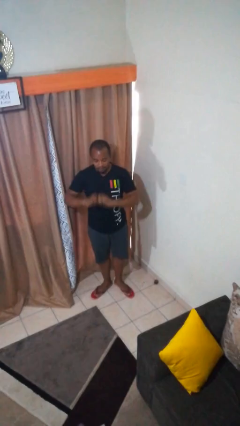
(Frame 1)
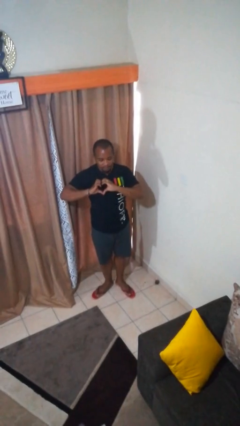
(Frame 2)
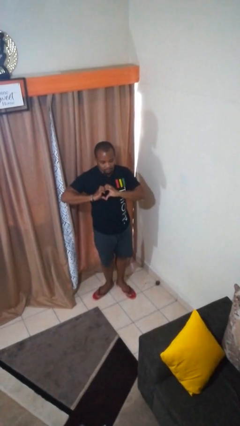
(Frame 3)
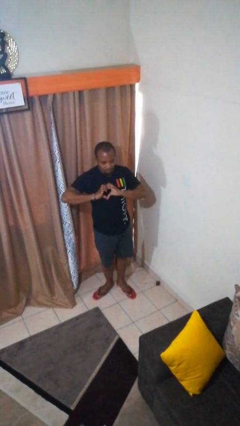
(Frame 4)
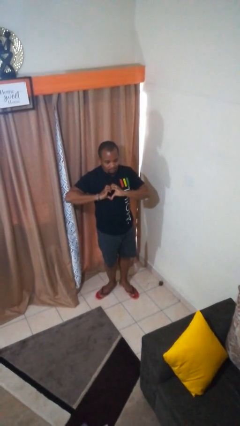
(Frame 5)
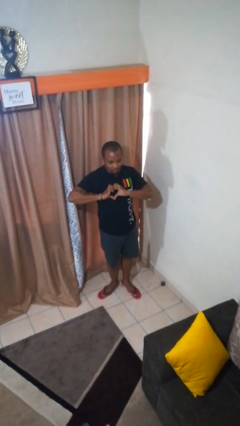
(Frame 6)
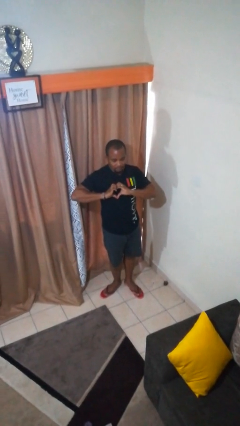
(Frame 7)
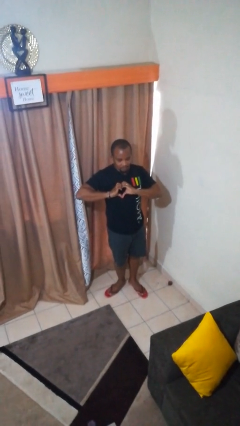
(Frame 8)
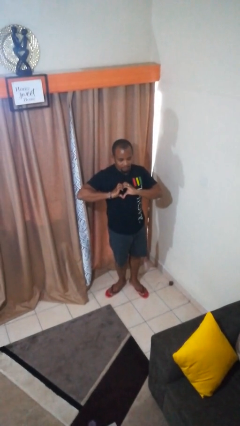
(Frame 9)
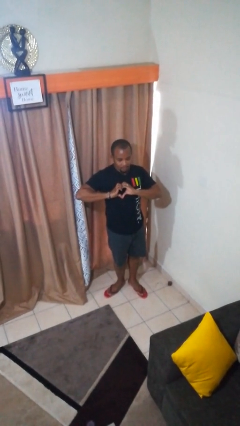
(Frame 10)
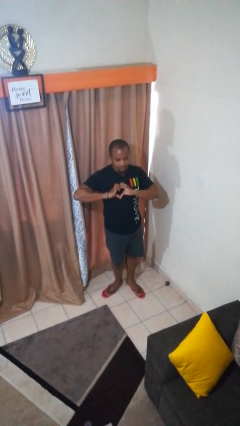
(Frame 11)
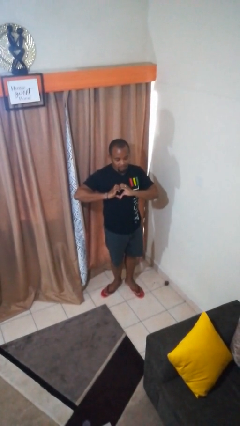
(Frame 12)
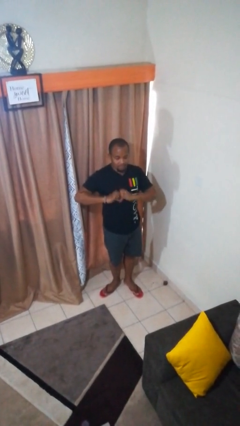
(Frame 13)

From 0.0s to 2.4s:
person gestures heart

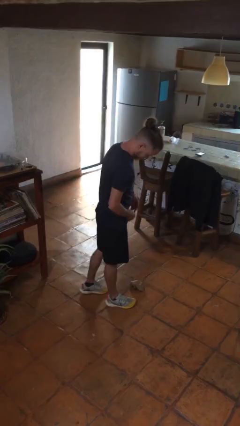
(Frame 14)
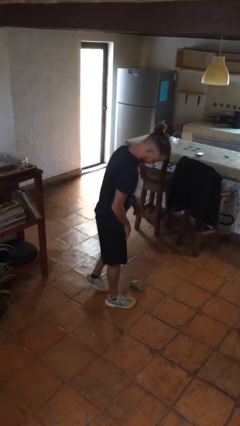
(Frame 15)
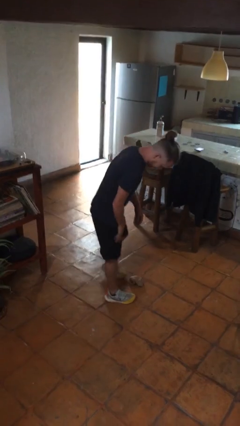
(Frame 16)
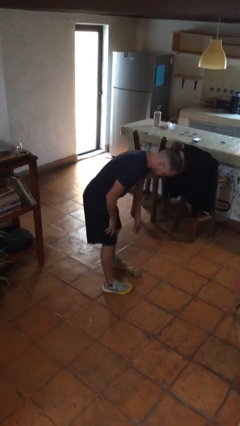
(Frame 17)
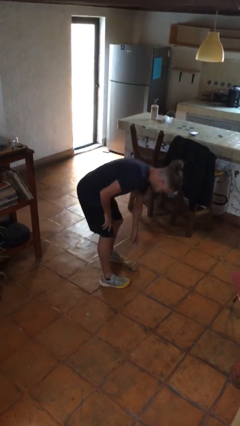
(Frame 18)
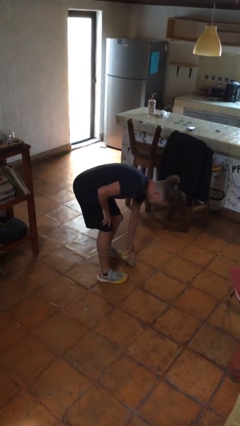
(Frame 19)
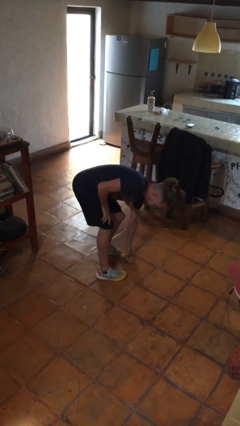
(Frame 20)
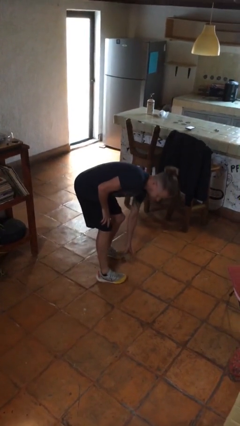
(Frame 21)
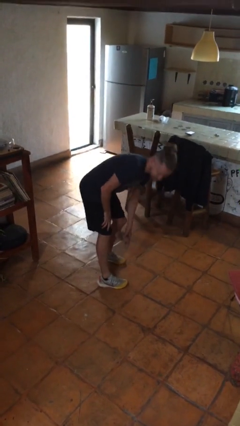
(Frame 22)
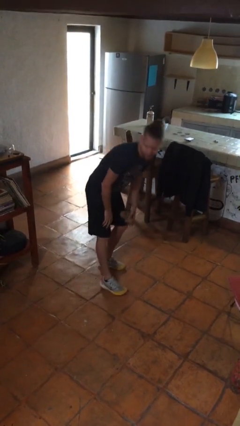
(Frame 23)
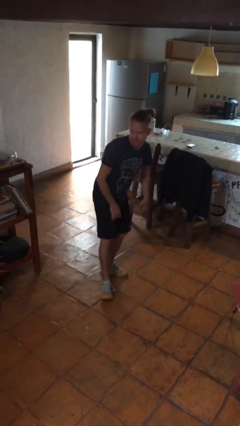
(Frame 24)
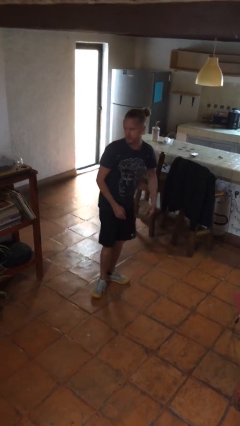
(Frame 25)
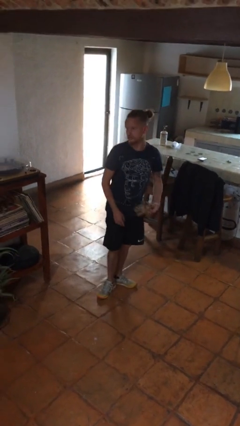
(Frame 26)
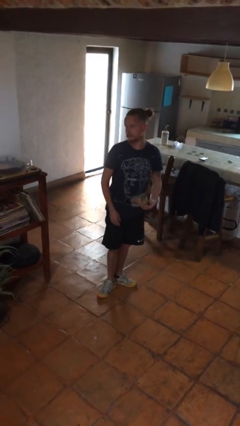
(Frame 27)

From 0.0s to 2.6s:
person picks up object from floor

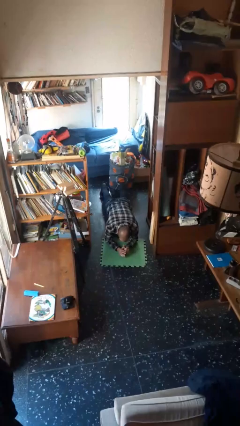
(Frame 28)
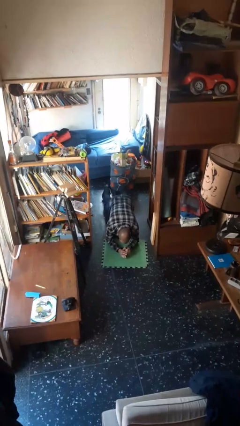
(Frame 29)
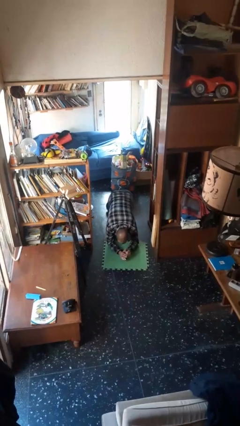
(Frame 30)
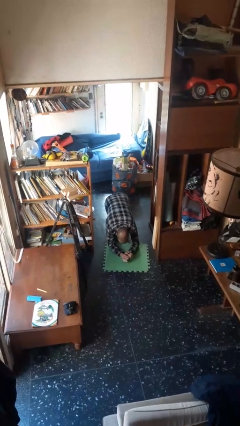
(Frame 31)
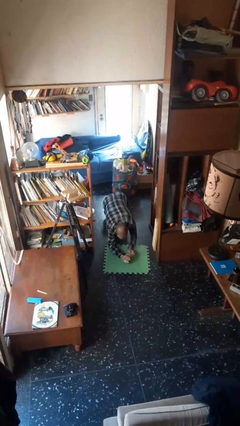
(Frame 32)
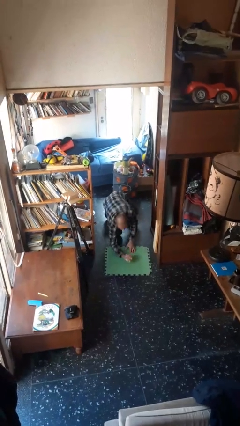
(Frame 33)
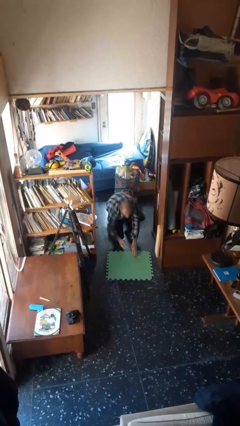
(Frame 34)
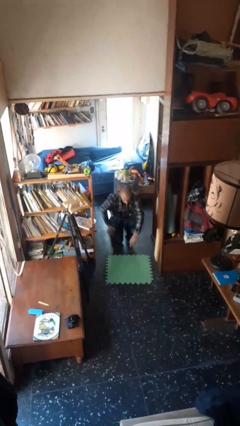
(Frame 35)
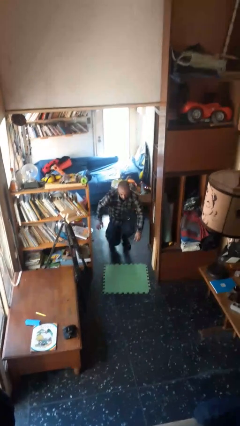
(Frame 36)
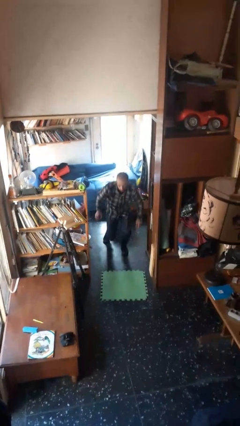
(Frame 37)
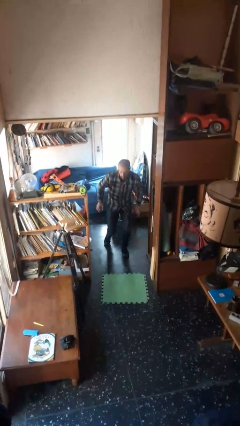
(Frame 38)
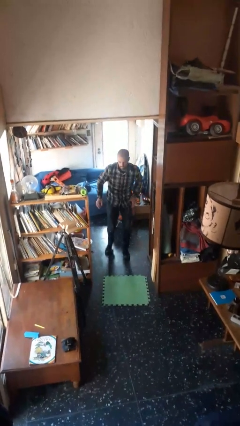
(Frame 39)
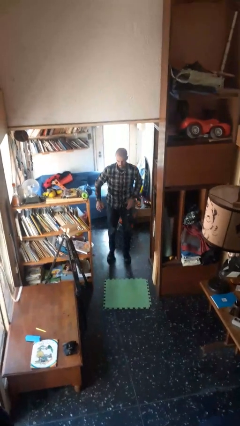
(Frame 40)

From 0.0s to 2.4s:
person stands up from floor

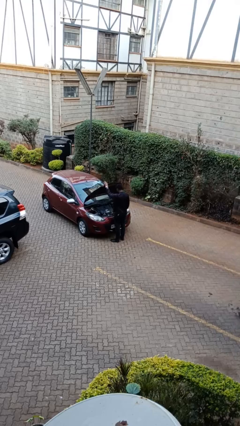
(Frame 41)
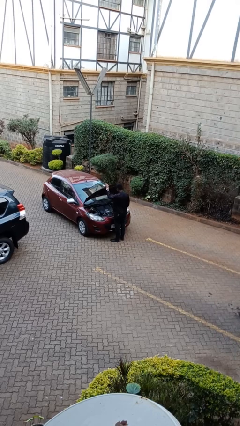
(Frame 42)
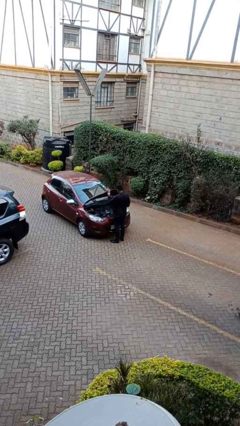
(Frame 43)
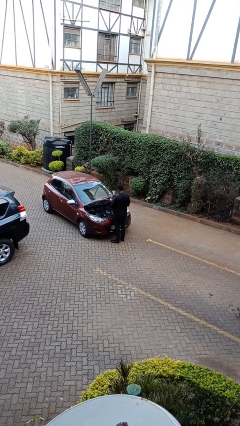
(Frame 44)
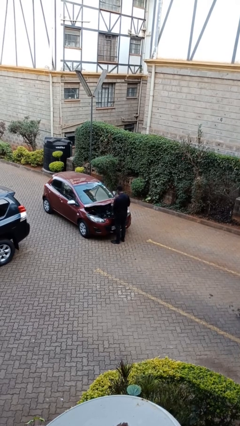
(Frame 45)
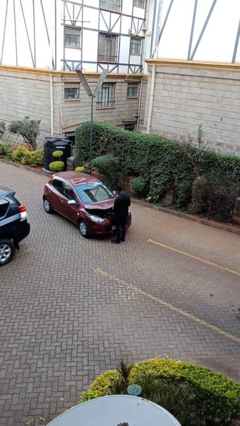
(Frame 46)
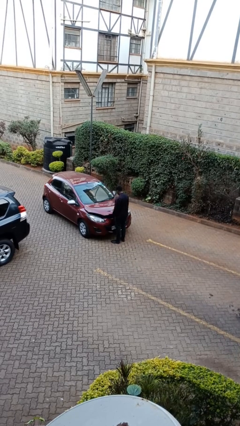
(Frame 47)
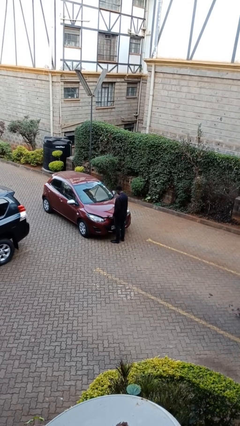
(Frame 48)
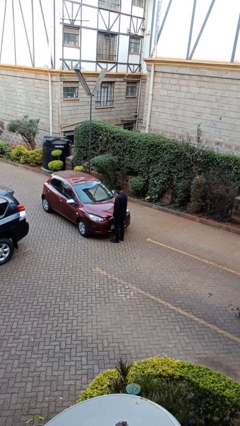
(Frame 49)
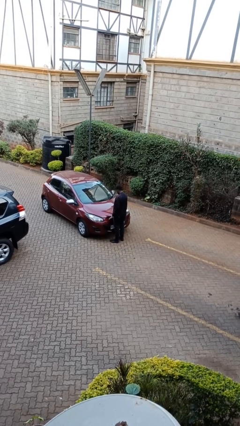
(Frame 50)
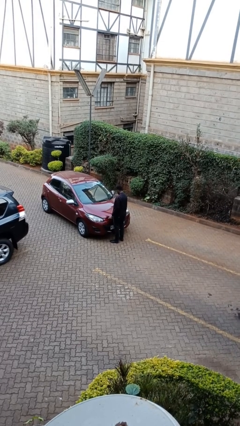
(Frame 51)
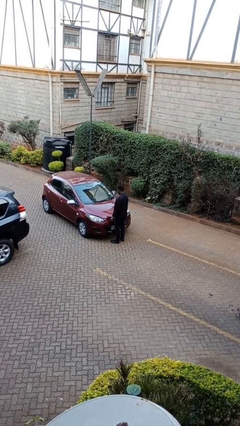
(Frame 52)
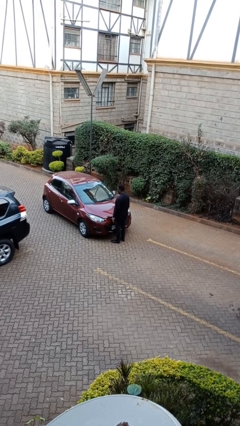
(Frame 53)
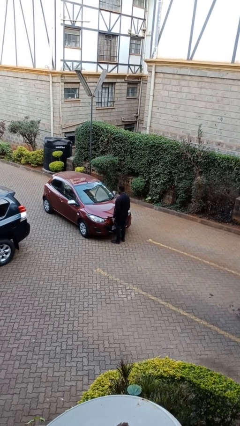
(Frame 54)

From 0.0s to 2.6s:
person closes car hood

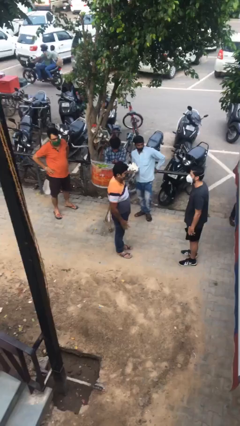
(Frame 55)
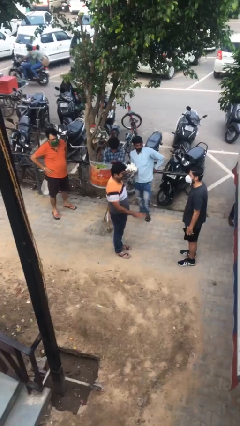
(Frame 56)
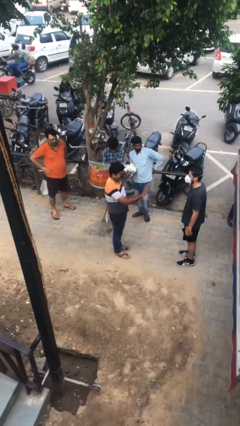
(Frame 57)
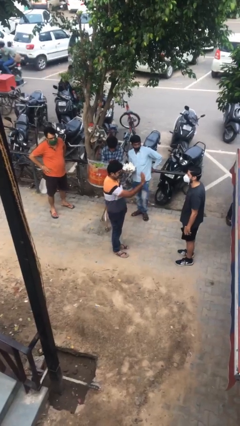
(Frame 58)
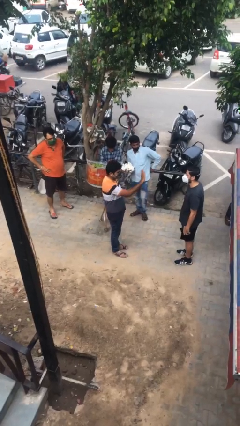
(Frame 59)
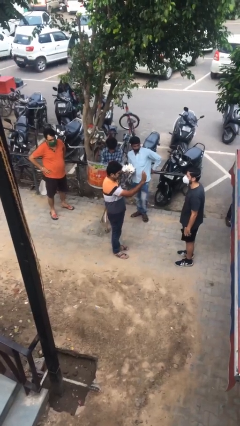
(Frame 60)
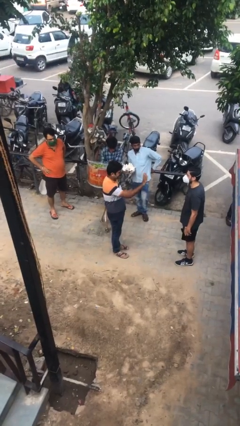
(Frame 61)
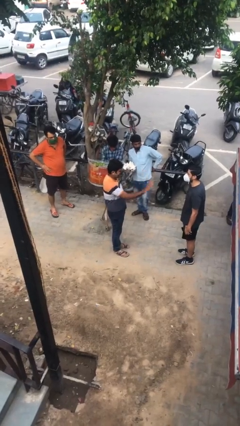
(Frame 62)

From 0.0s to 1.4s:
person waves at person

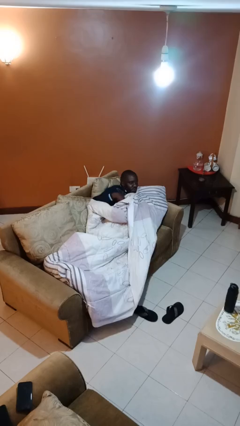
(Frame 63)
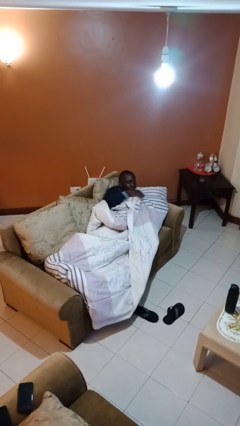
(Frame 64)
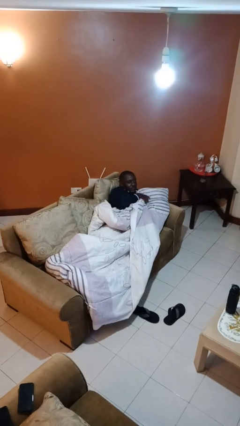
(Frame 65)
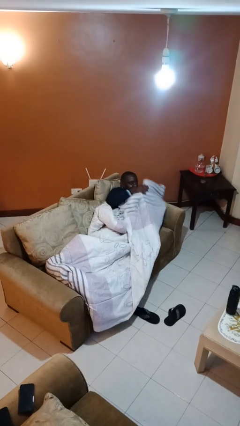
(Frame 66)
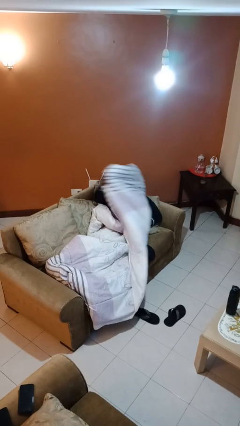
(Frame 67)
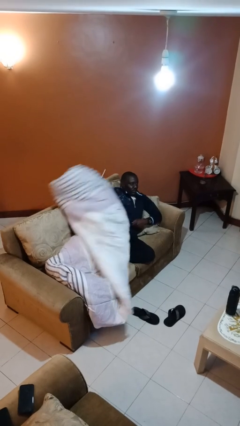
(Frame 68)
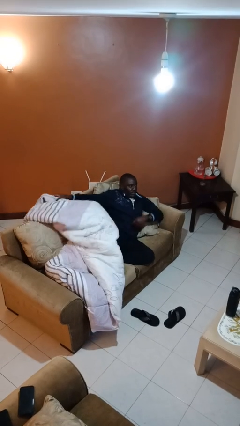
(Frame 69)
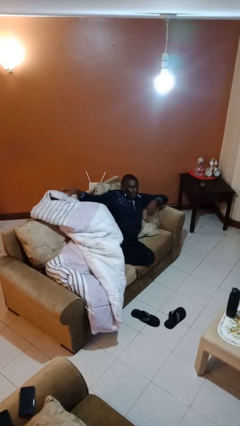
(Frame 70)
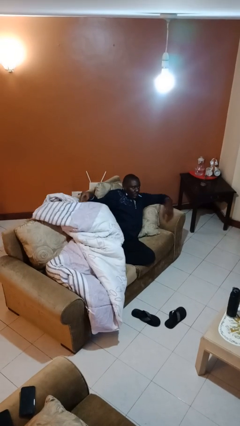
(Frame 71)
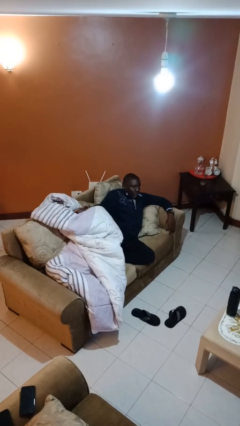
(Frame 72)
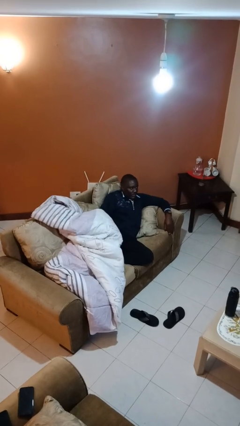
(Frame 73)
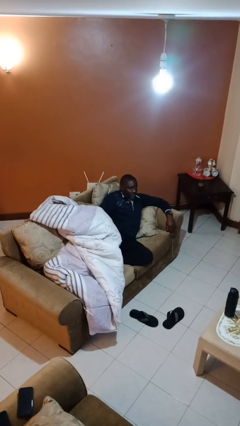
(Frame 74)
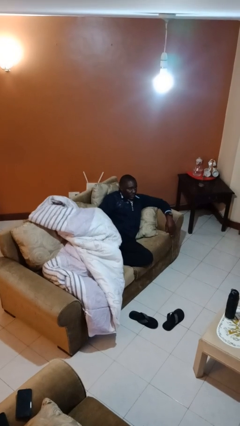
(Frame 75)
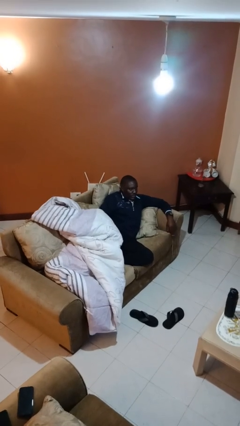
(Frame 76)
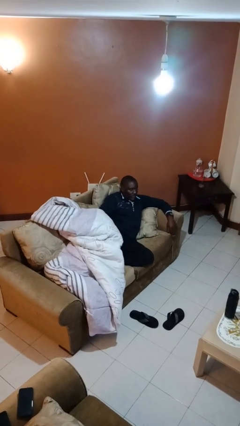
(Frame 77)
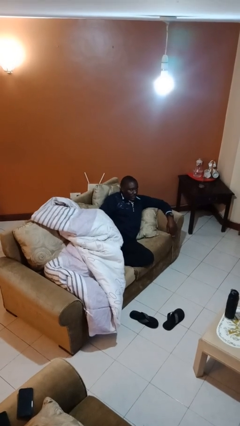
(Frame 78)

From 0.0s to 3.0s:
person uncovers with blanket

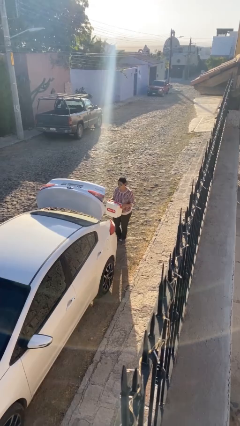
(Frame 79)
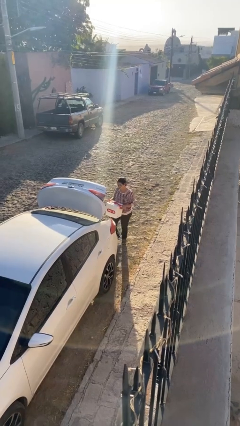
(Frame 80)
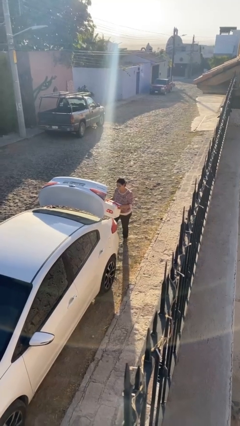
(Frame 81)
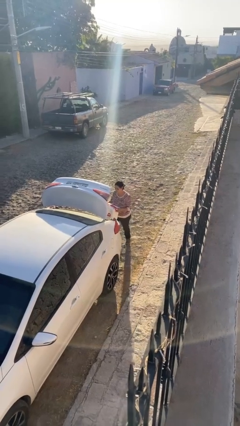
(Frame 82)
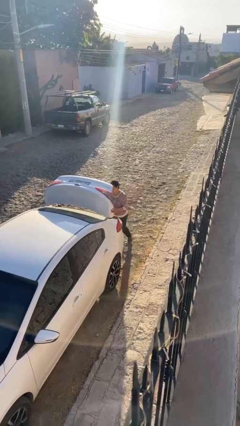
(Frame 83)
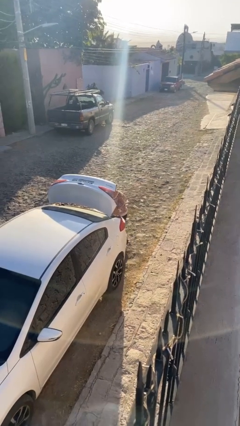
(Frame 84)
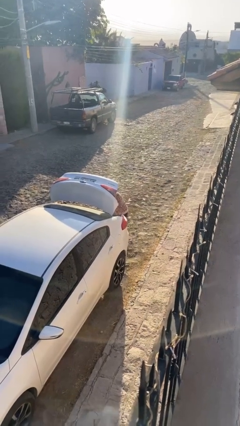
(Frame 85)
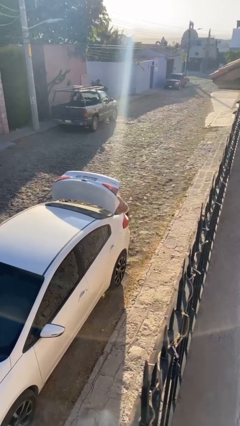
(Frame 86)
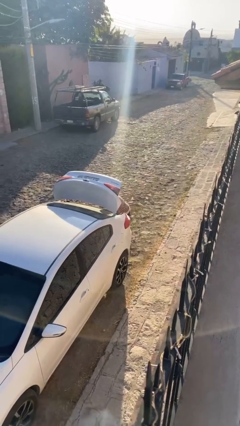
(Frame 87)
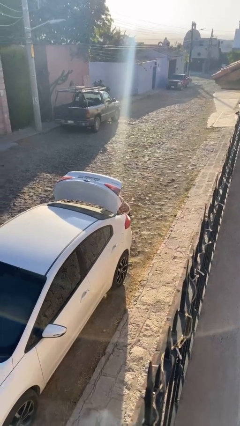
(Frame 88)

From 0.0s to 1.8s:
person loads car

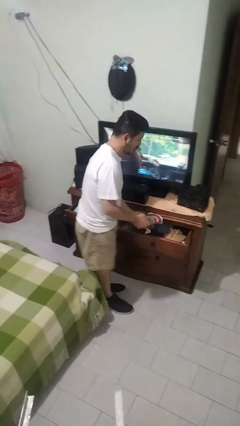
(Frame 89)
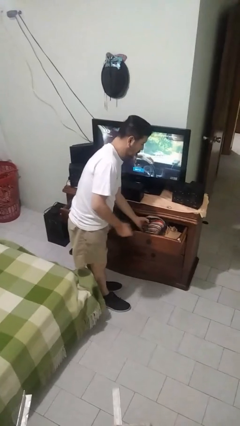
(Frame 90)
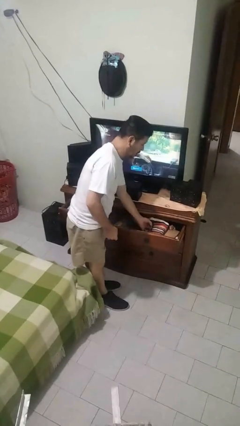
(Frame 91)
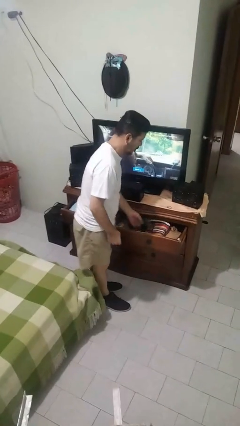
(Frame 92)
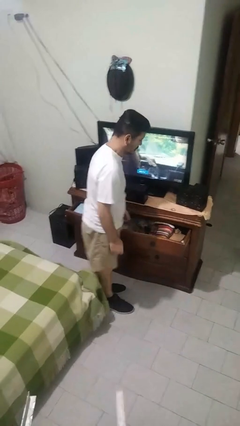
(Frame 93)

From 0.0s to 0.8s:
person puts clothes into dresser
